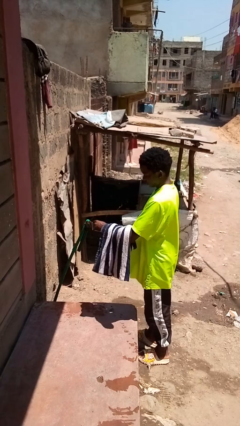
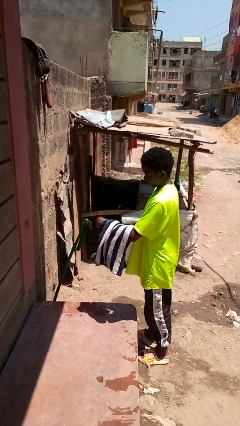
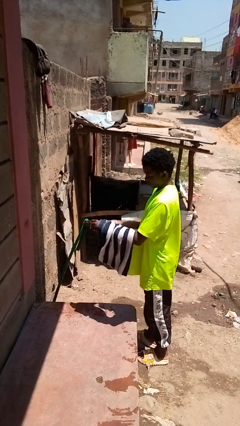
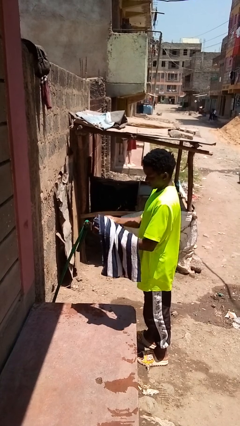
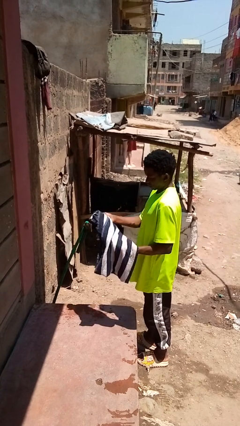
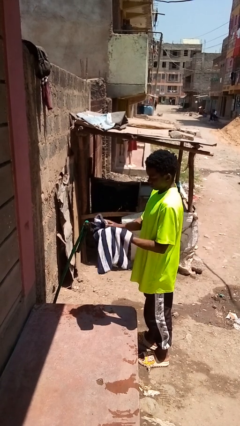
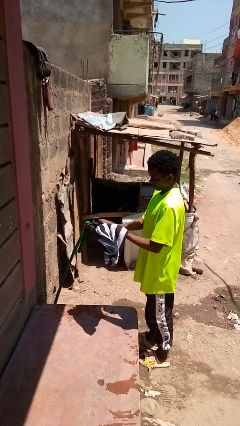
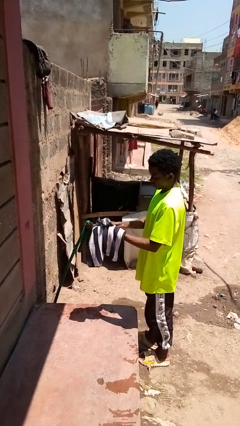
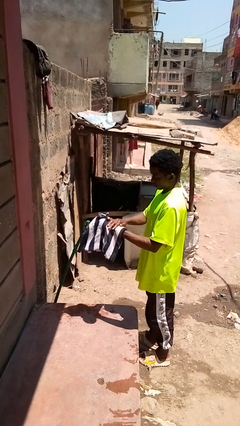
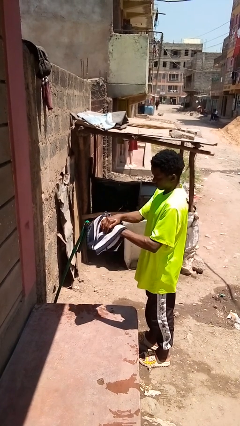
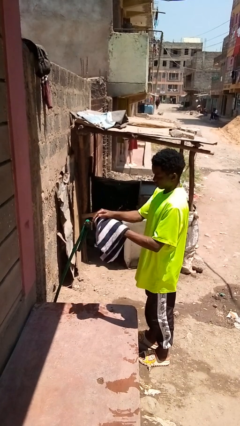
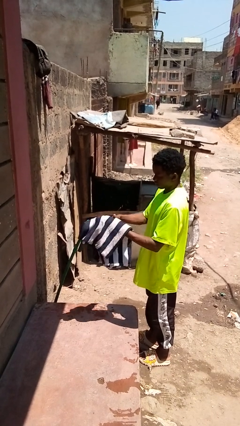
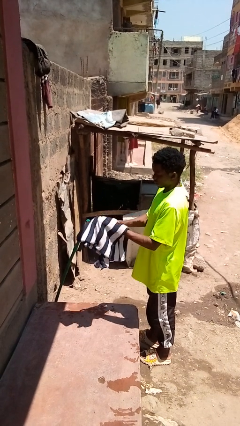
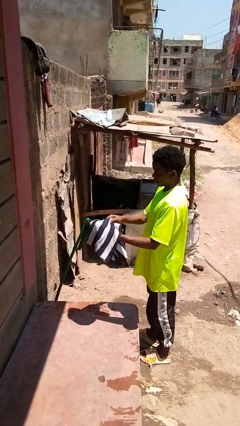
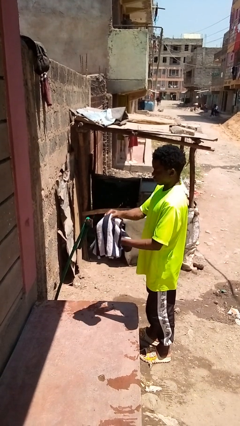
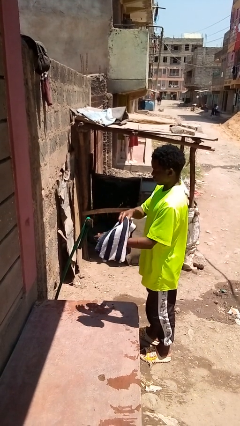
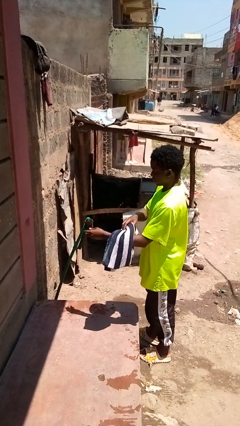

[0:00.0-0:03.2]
person dries hands with towel

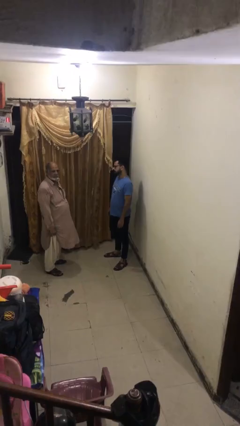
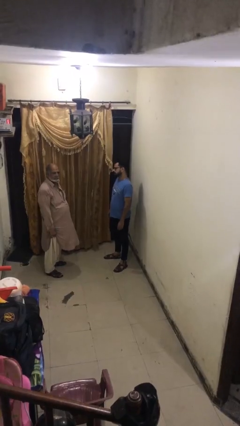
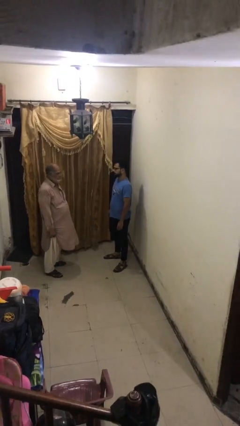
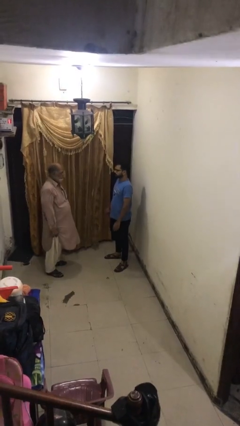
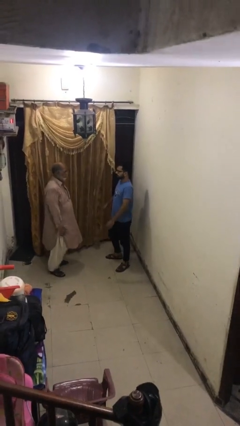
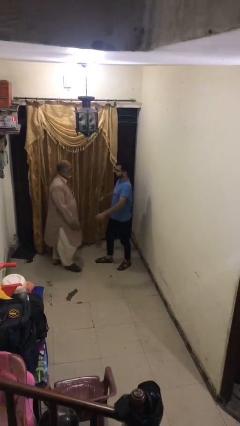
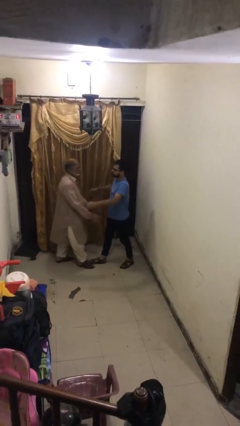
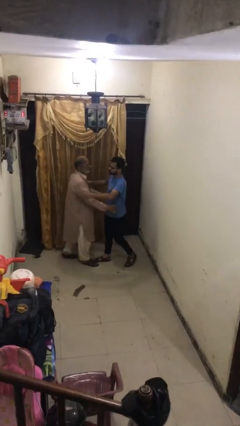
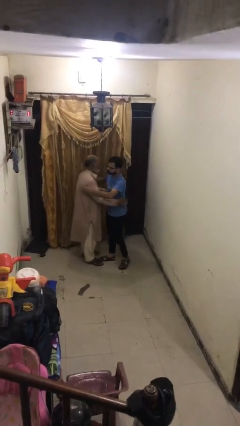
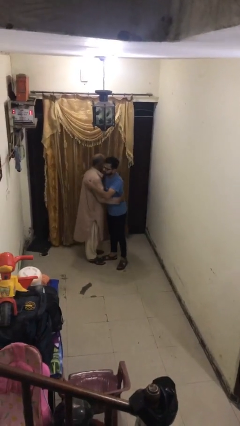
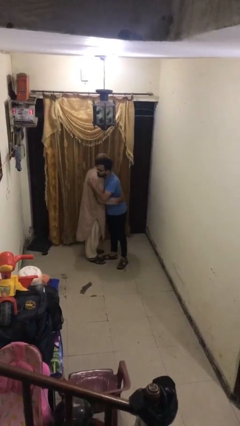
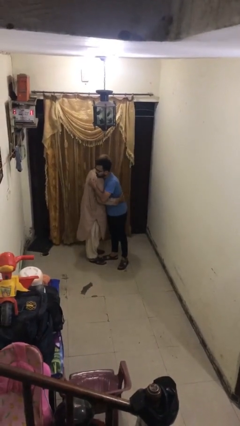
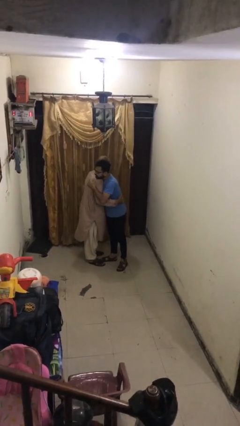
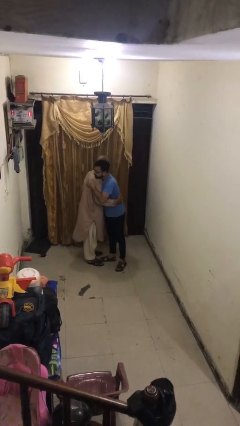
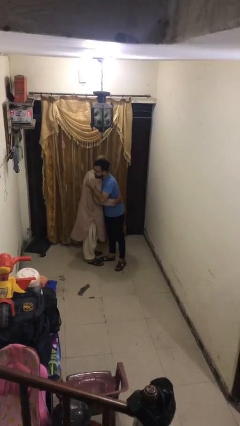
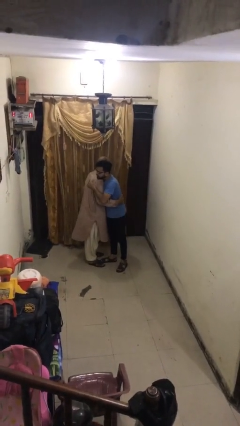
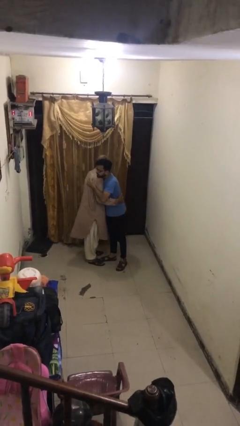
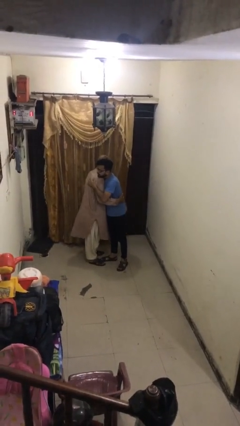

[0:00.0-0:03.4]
person embraces person

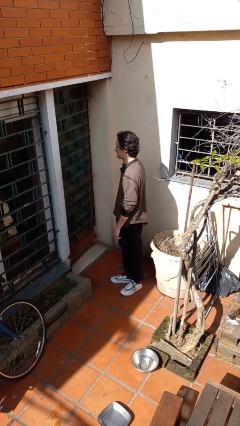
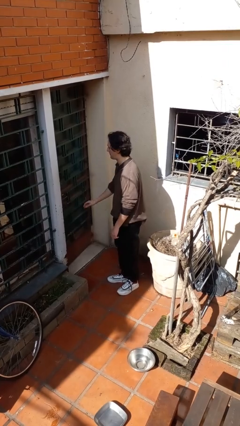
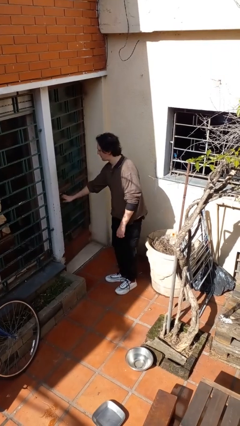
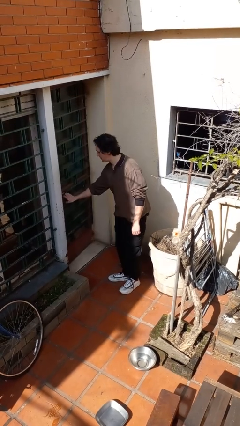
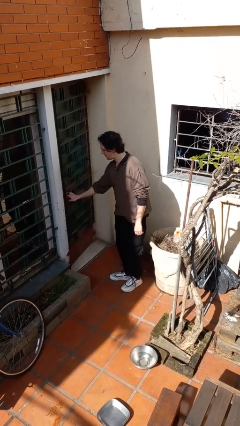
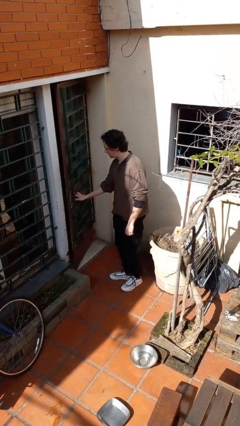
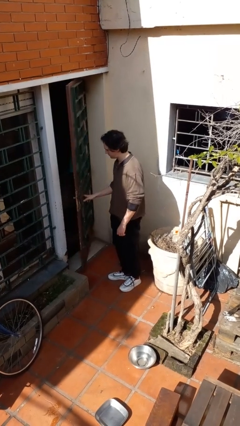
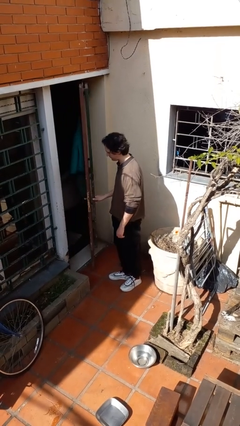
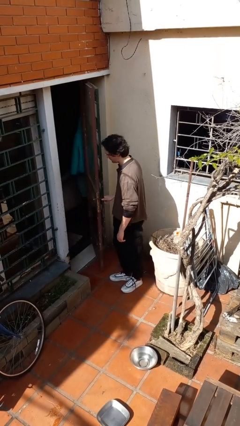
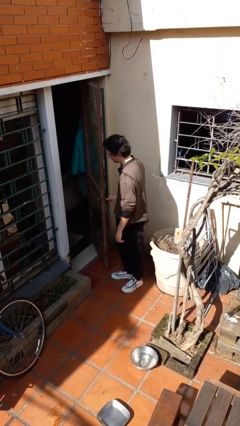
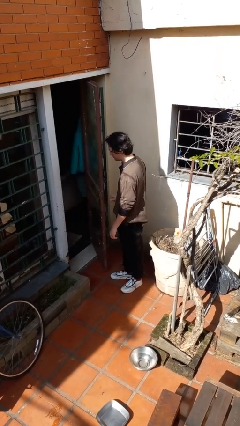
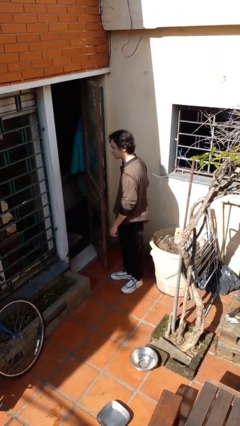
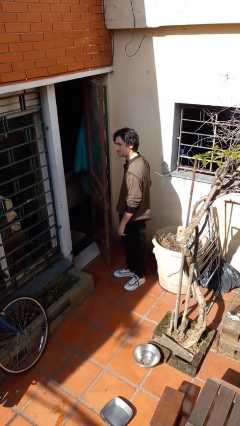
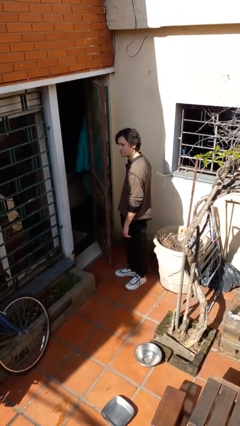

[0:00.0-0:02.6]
person opens facility door

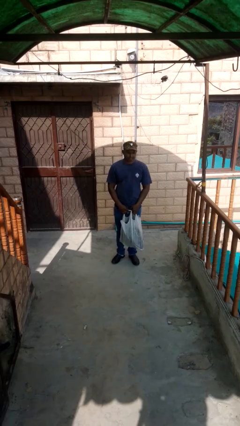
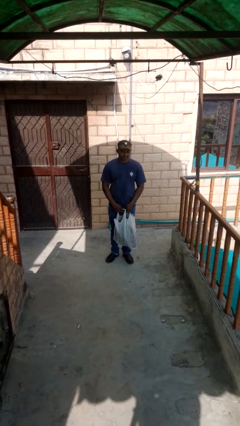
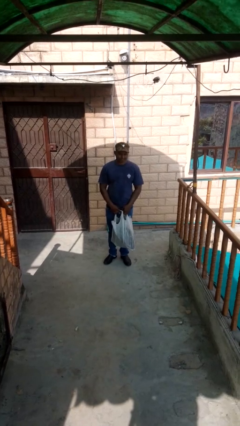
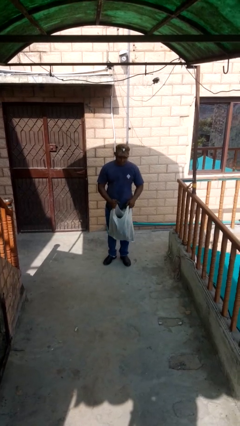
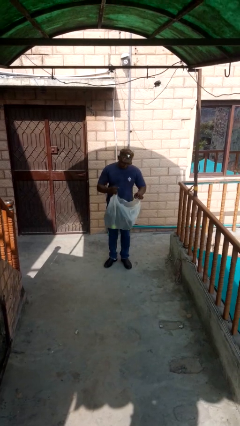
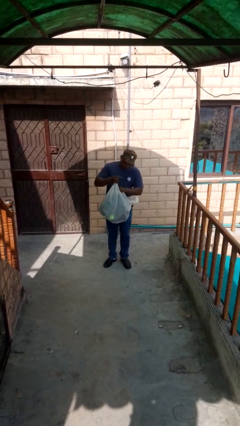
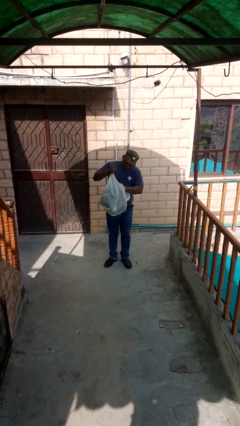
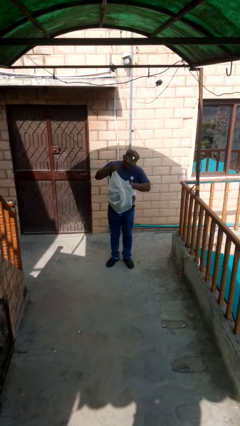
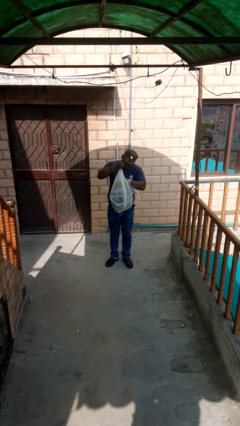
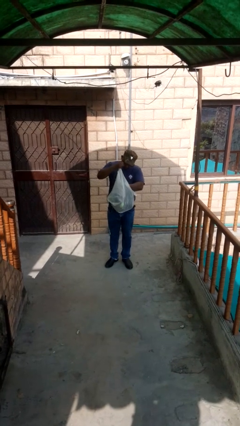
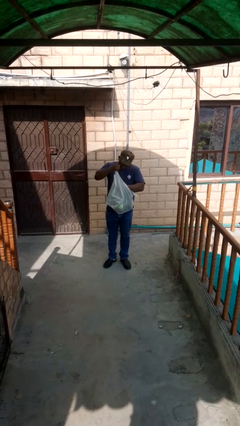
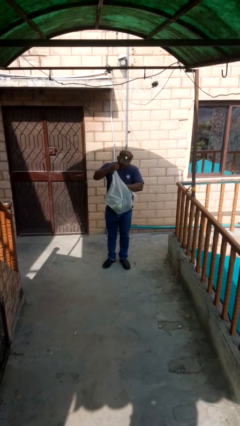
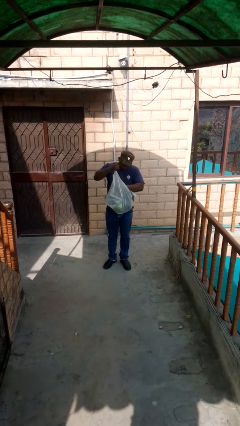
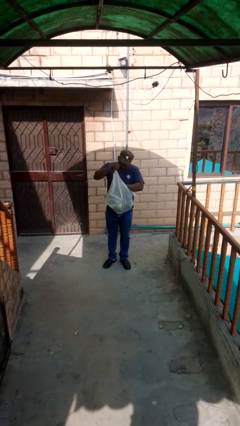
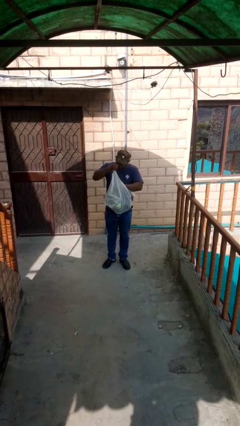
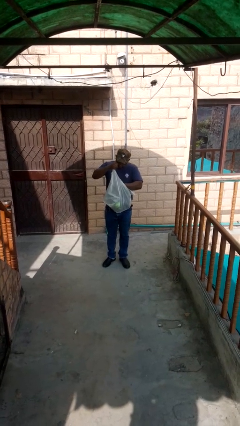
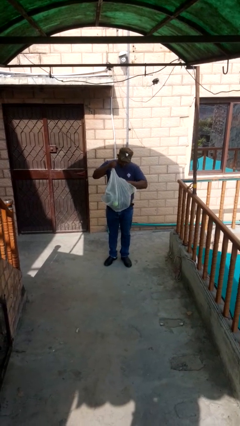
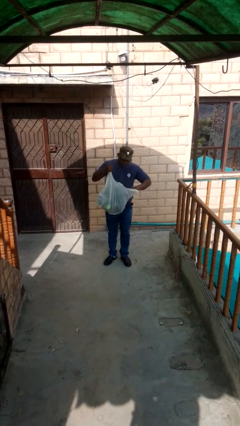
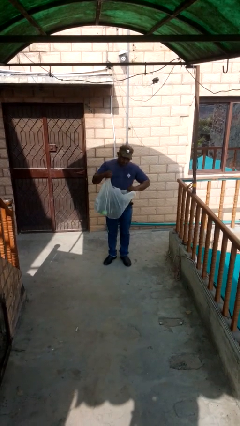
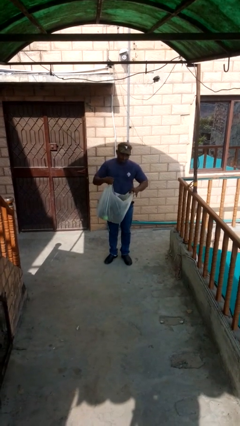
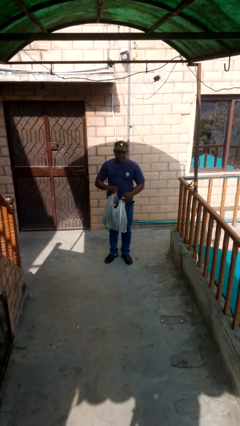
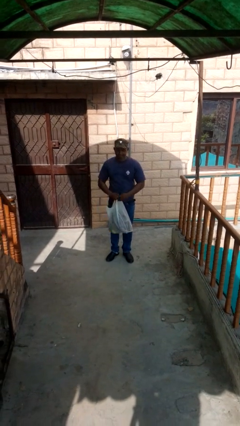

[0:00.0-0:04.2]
person searches in bag

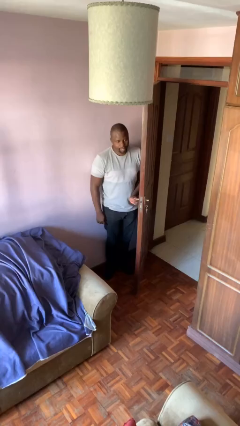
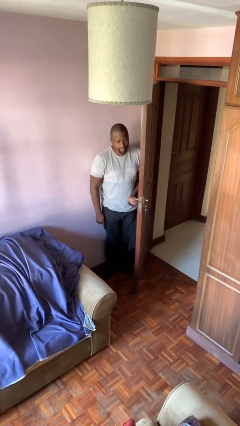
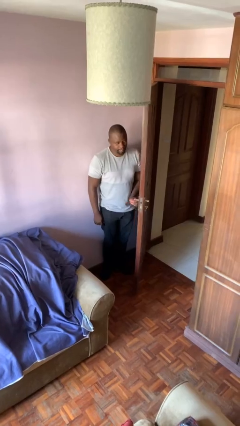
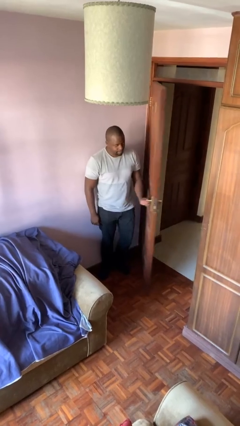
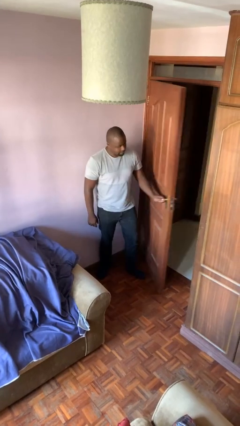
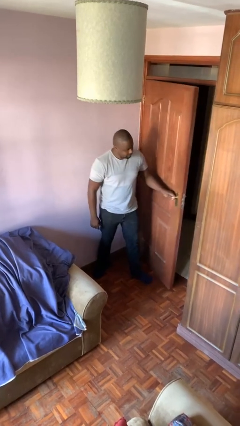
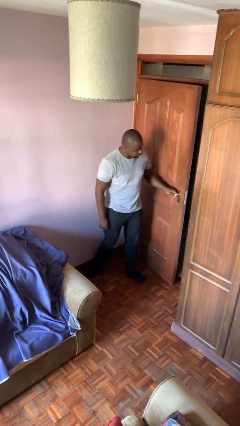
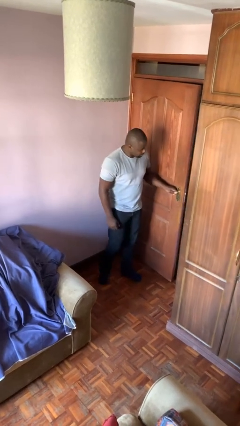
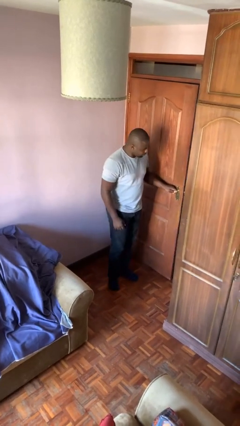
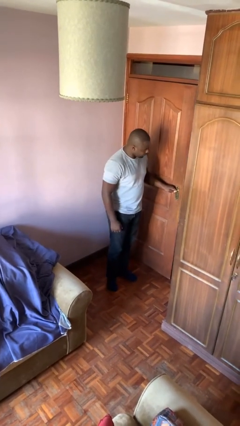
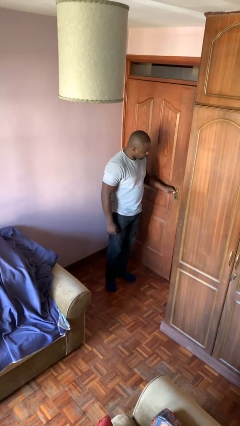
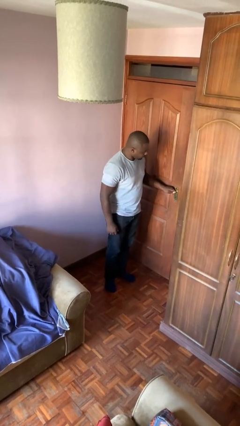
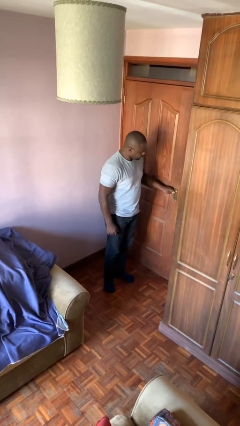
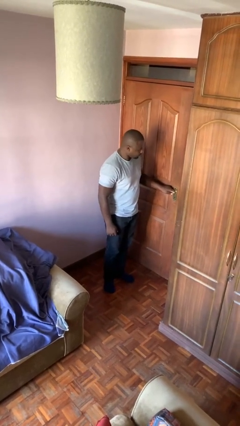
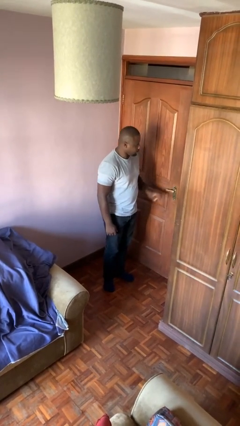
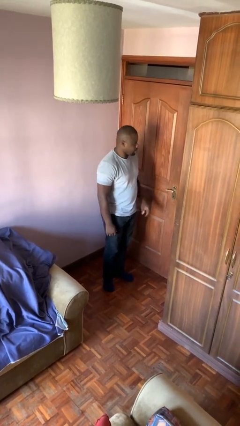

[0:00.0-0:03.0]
person closes facility door

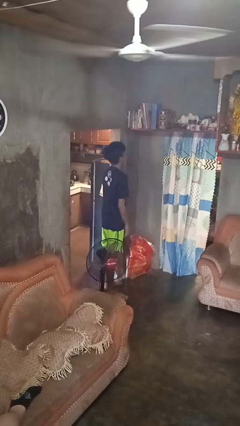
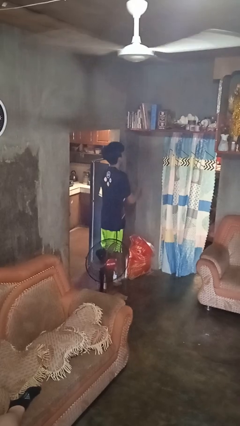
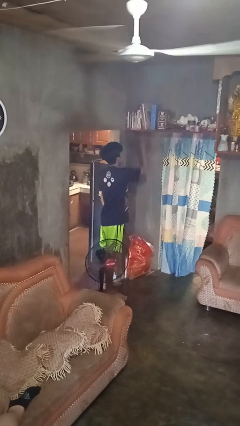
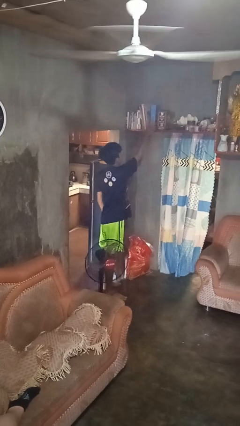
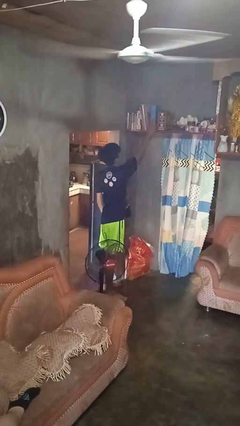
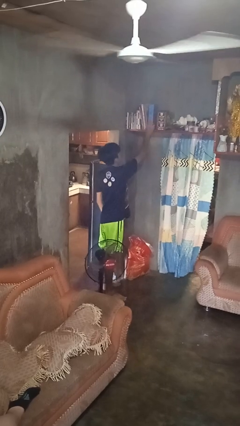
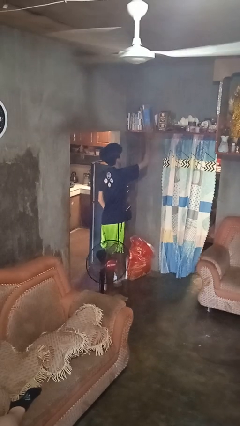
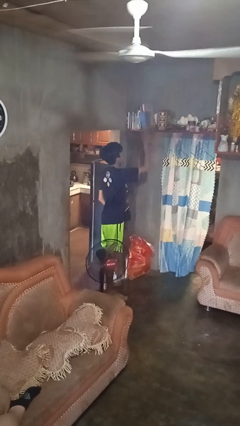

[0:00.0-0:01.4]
person picks up object from shelf
